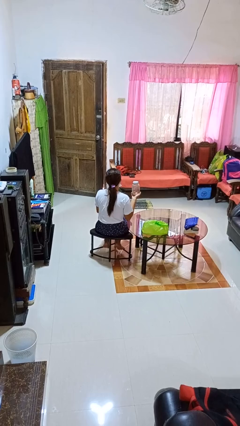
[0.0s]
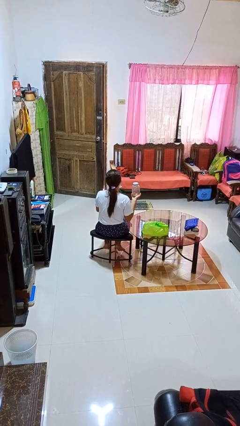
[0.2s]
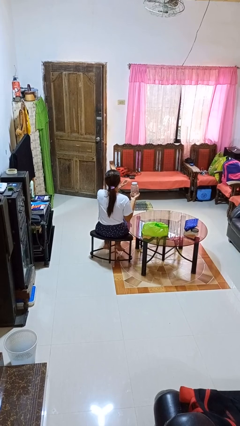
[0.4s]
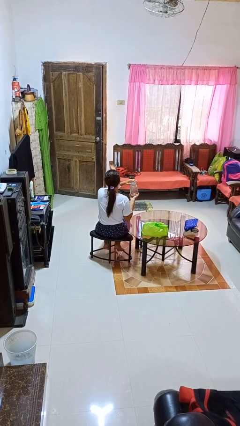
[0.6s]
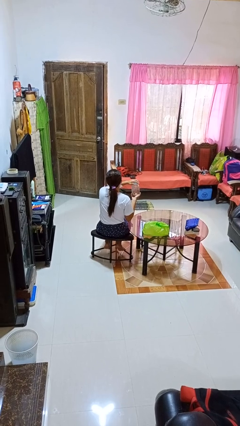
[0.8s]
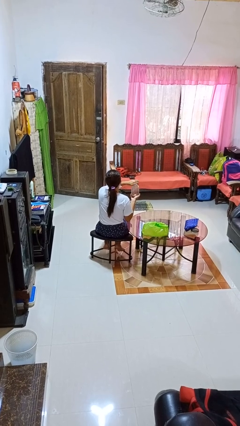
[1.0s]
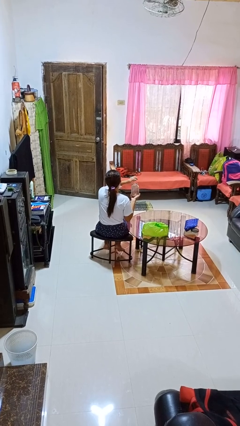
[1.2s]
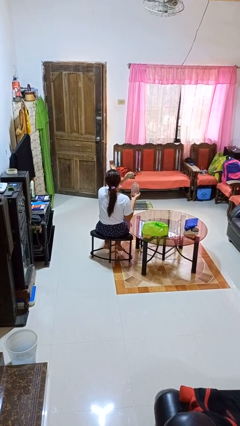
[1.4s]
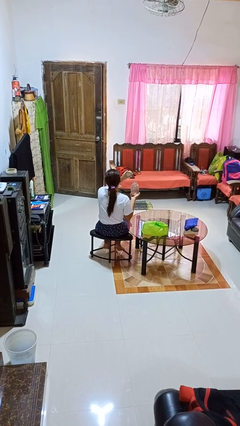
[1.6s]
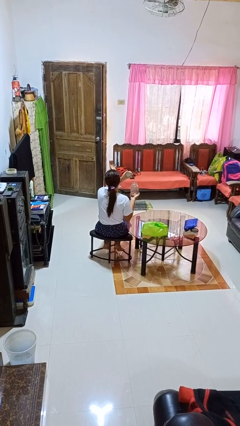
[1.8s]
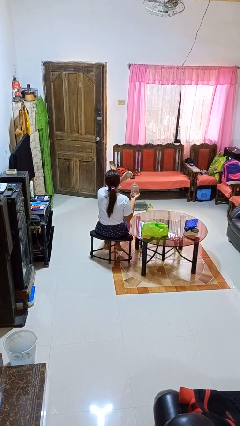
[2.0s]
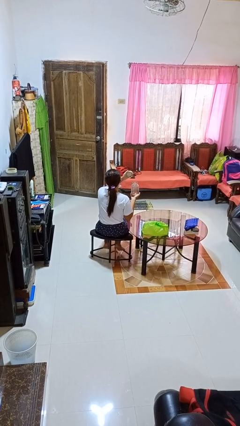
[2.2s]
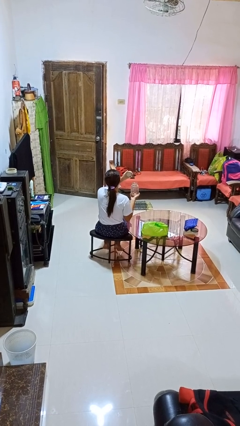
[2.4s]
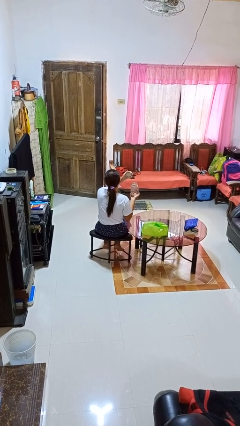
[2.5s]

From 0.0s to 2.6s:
person opens jar

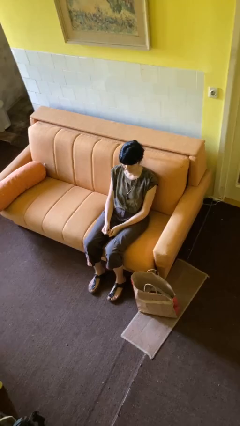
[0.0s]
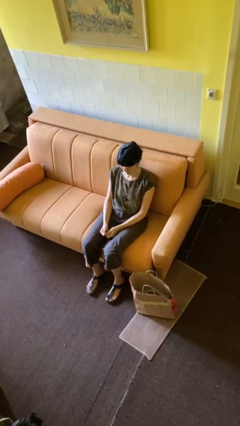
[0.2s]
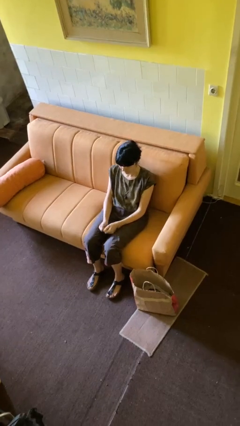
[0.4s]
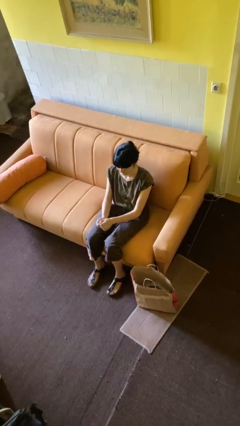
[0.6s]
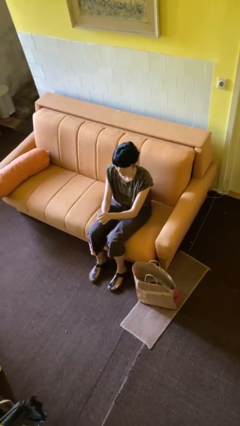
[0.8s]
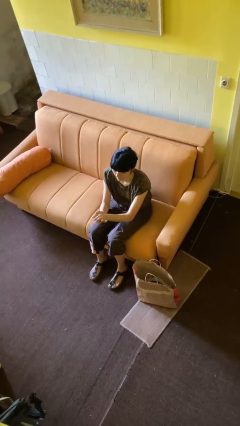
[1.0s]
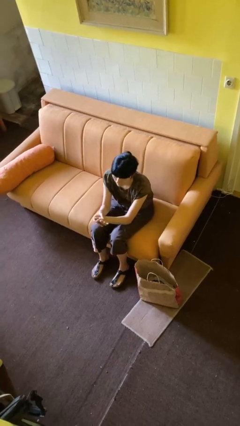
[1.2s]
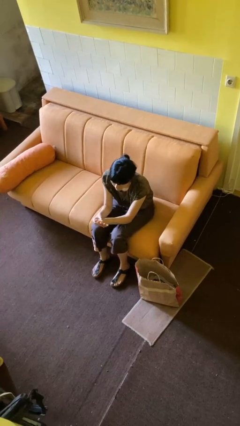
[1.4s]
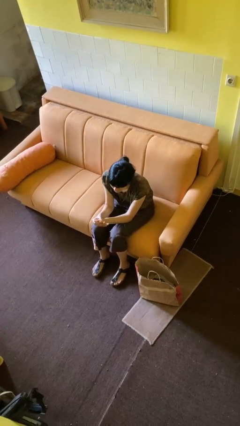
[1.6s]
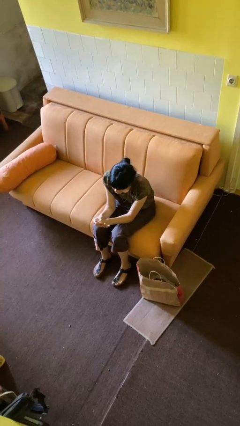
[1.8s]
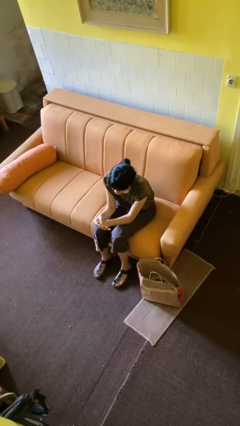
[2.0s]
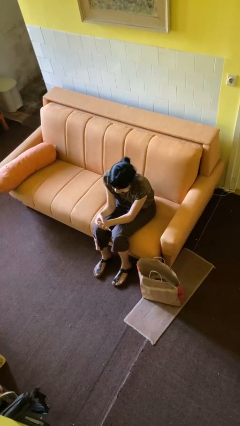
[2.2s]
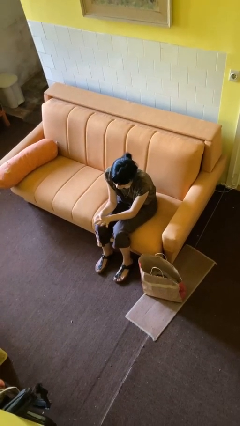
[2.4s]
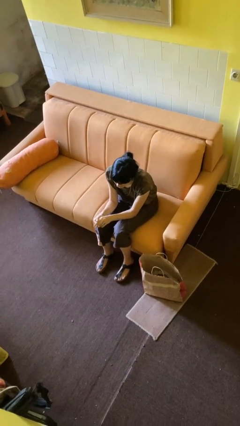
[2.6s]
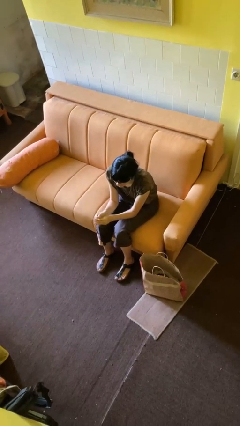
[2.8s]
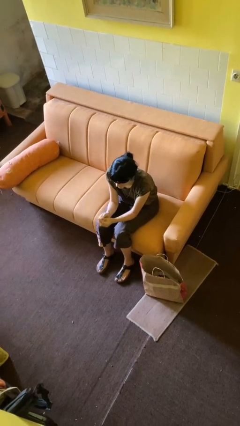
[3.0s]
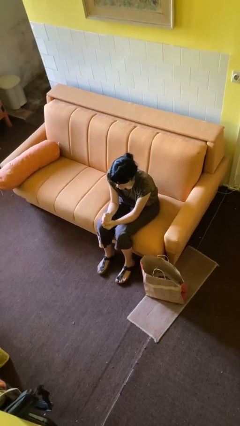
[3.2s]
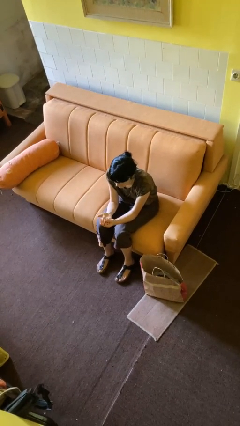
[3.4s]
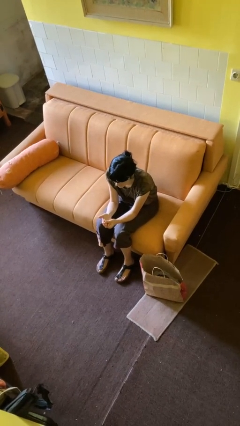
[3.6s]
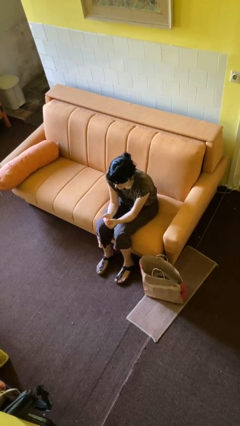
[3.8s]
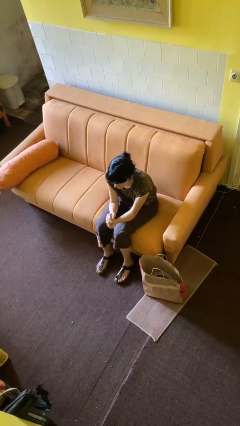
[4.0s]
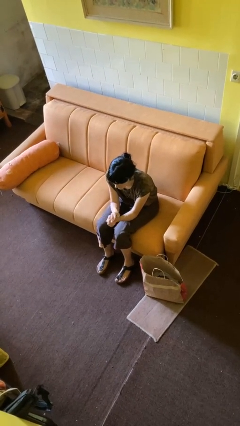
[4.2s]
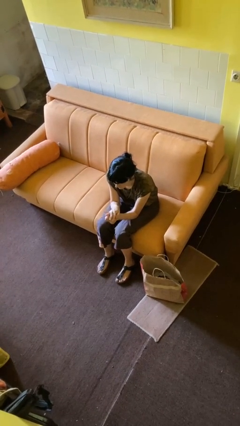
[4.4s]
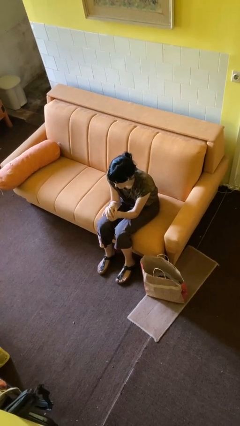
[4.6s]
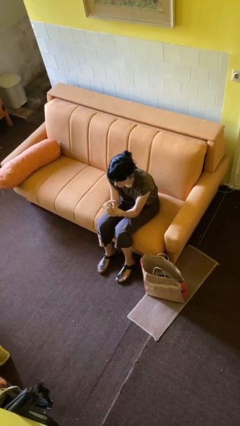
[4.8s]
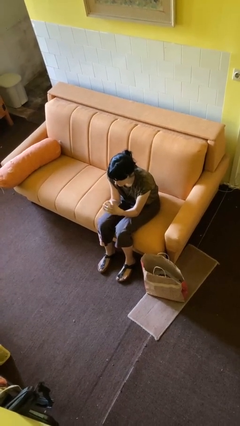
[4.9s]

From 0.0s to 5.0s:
person looks at hands in lap

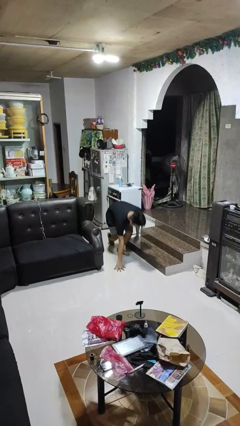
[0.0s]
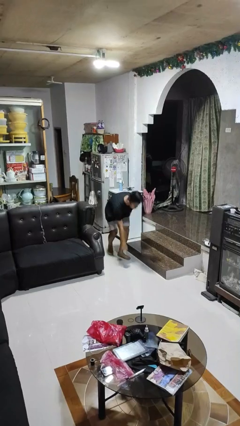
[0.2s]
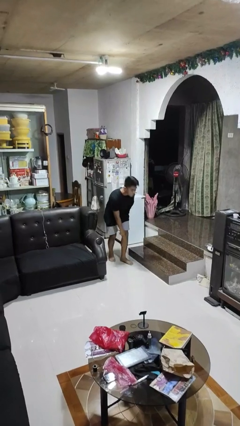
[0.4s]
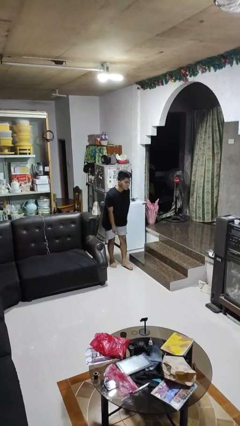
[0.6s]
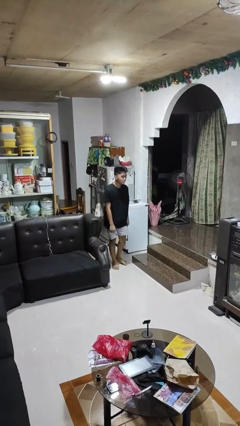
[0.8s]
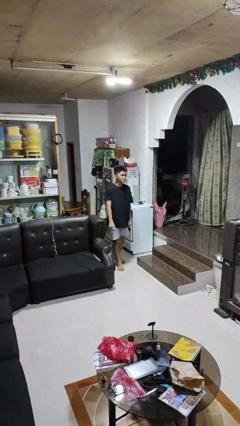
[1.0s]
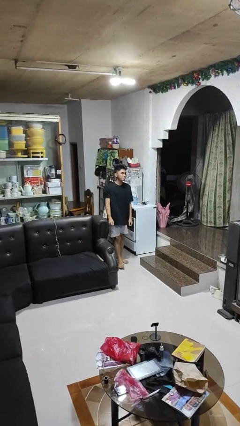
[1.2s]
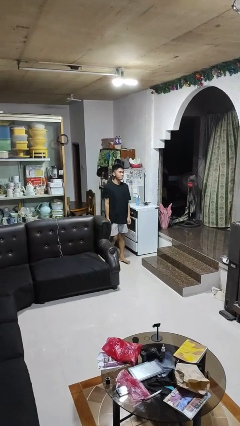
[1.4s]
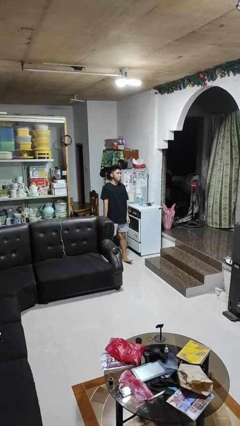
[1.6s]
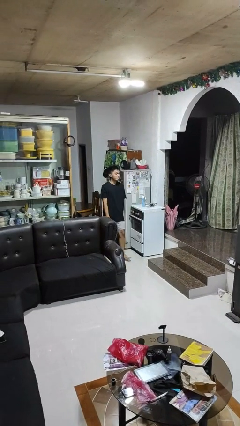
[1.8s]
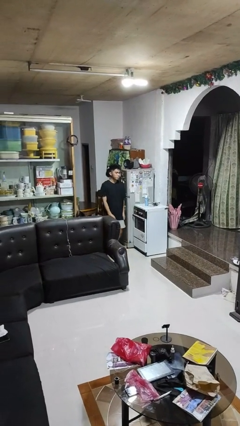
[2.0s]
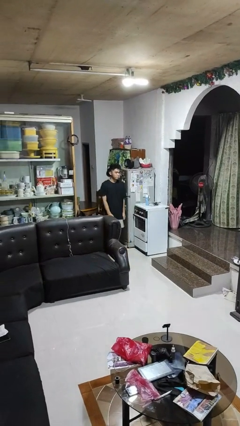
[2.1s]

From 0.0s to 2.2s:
person stands up from floor

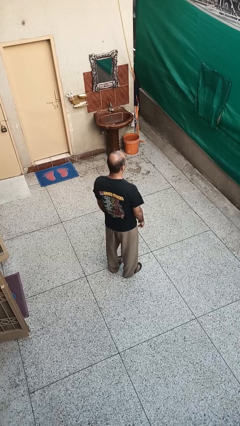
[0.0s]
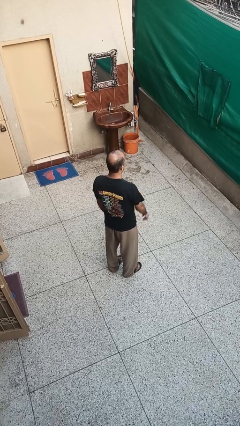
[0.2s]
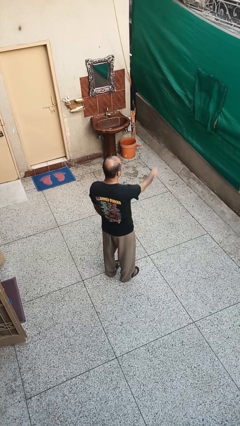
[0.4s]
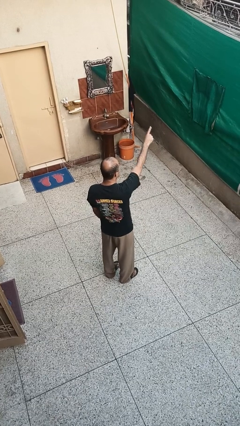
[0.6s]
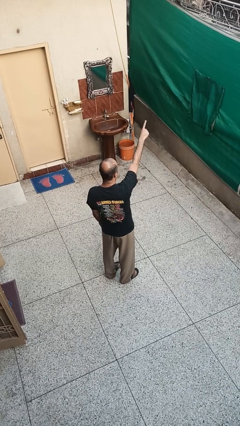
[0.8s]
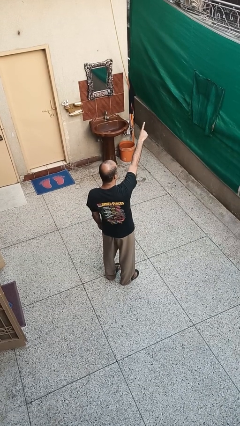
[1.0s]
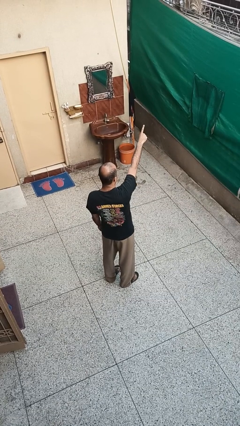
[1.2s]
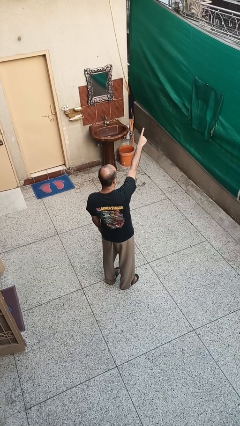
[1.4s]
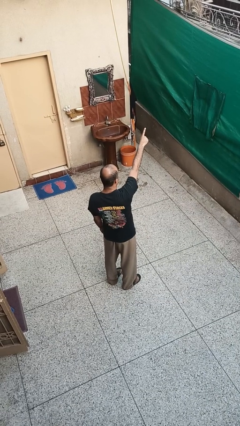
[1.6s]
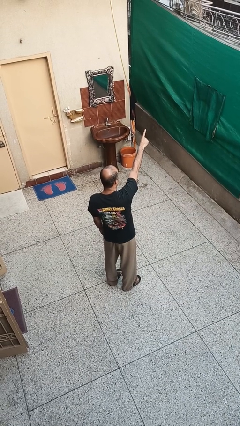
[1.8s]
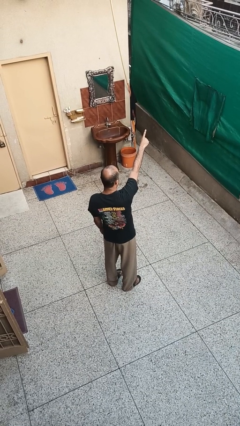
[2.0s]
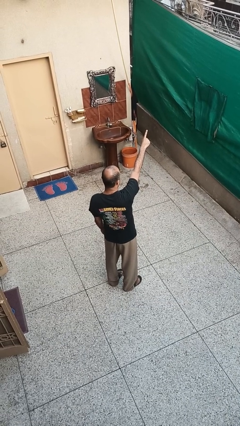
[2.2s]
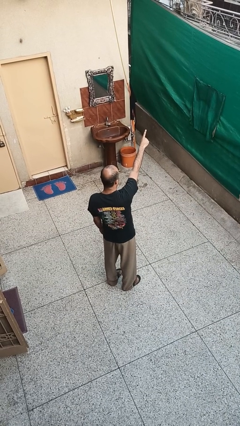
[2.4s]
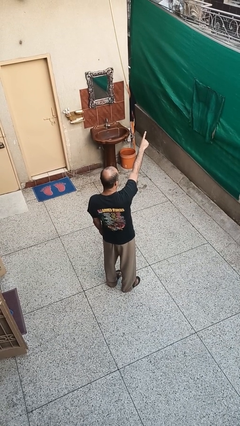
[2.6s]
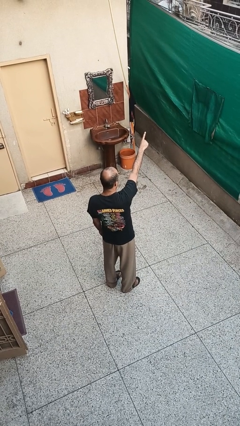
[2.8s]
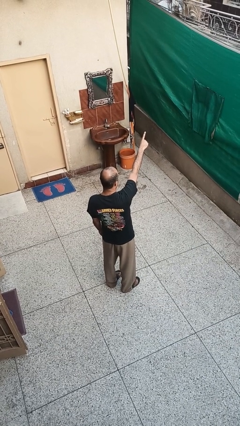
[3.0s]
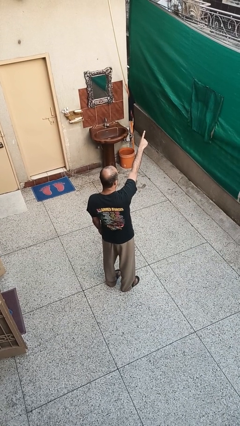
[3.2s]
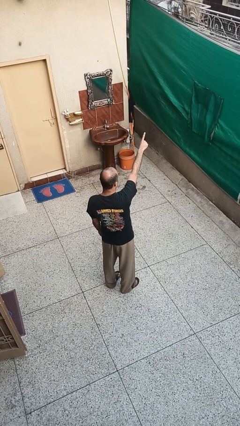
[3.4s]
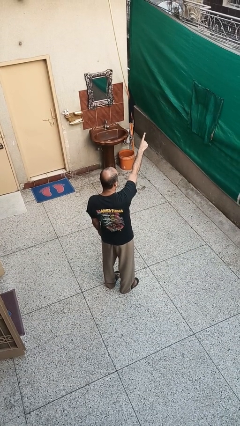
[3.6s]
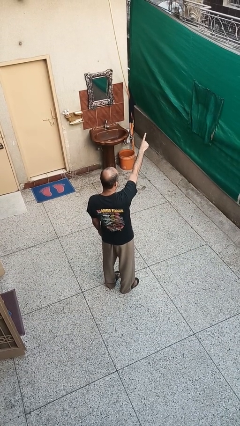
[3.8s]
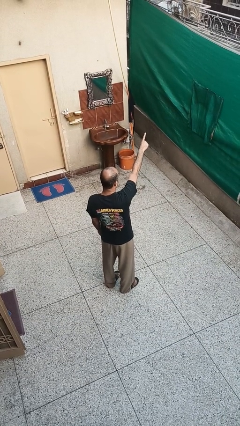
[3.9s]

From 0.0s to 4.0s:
person points at person

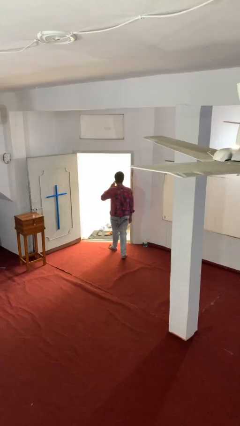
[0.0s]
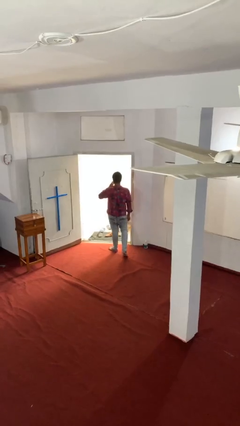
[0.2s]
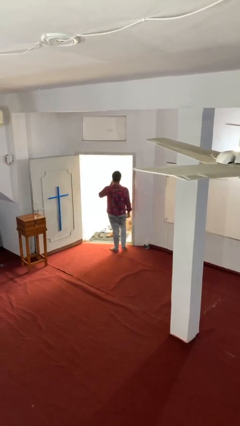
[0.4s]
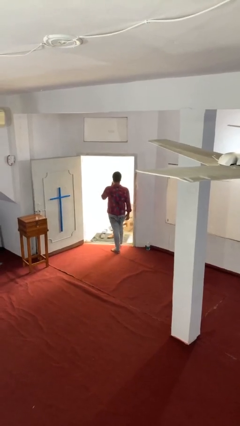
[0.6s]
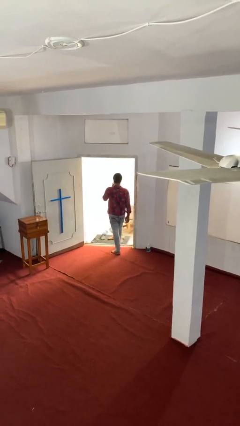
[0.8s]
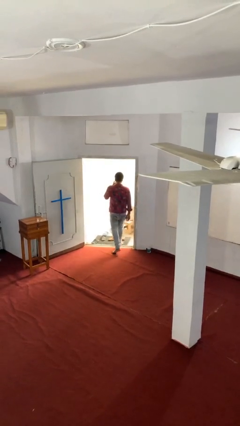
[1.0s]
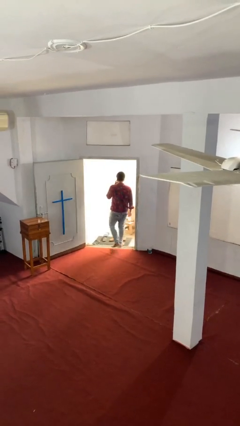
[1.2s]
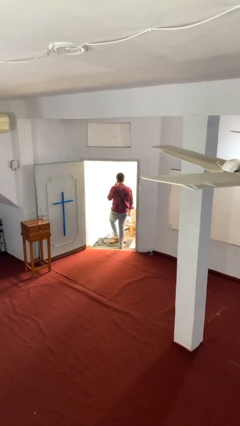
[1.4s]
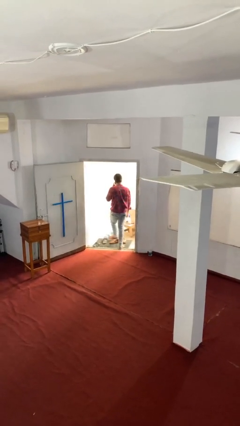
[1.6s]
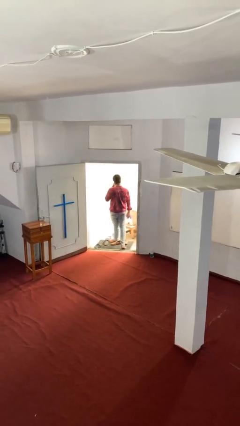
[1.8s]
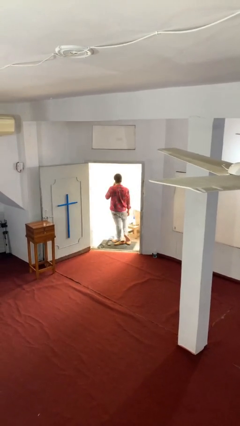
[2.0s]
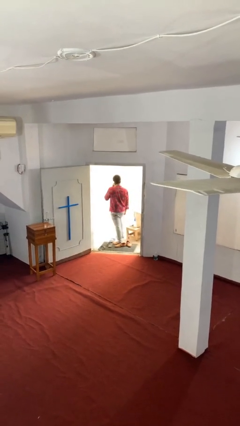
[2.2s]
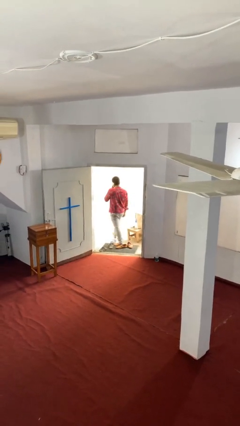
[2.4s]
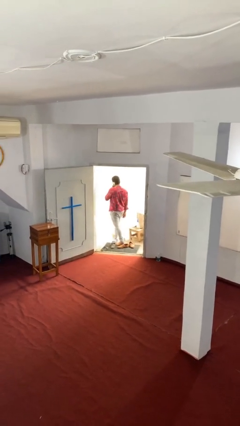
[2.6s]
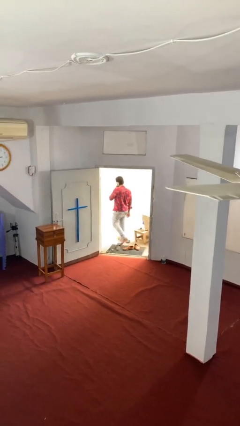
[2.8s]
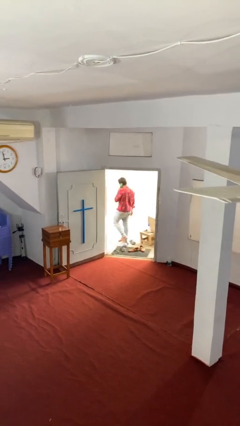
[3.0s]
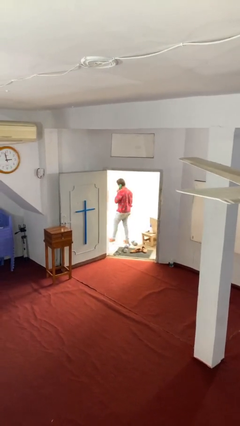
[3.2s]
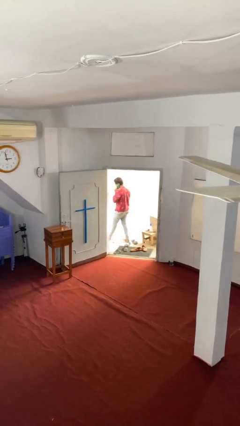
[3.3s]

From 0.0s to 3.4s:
person exits scene through structure

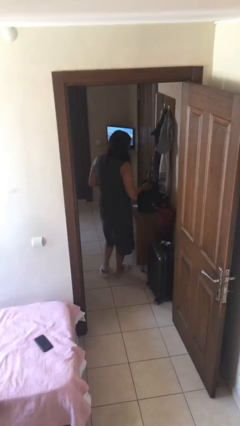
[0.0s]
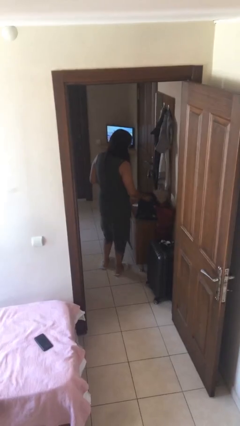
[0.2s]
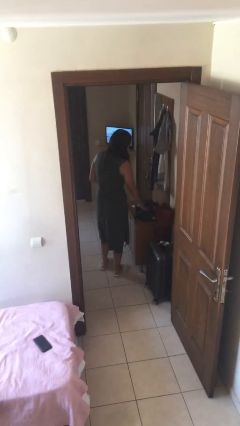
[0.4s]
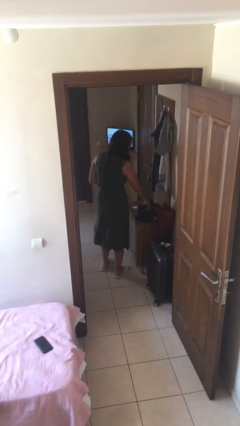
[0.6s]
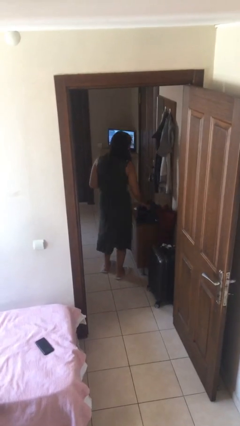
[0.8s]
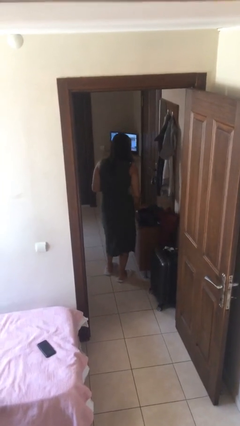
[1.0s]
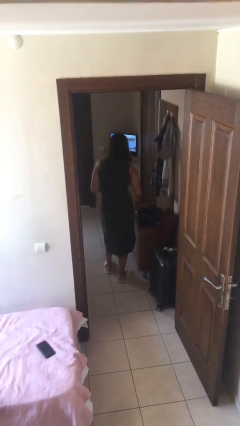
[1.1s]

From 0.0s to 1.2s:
person puts down object on table
